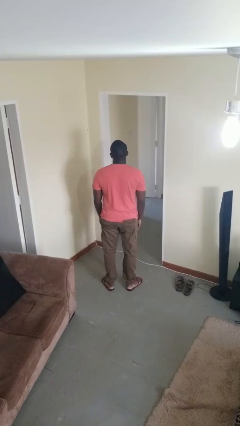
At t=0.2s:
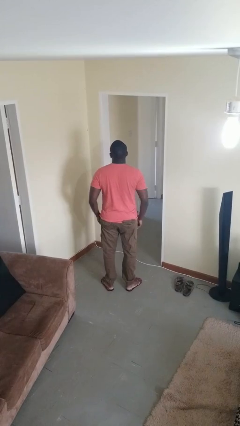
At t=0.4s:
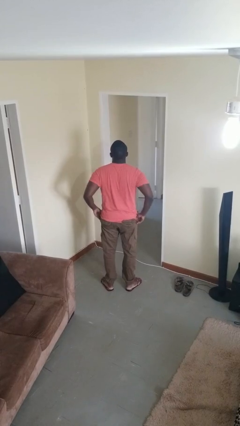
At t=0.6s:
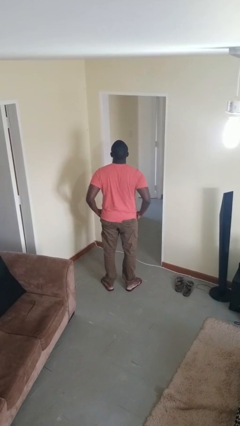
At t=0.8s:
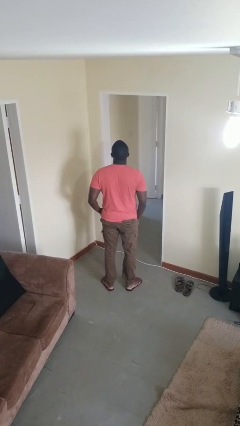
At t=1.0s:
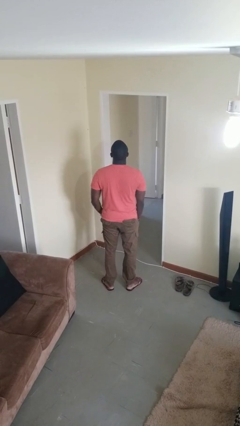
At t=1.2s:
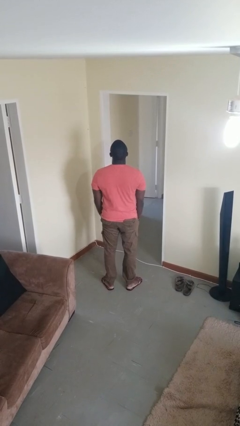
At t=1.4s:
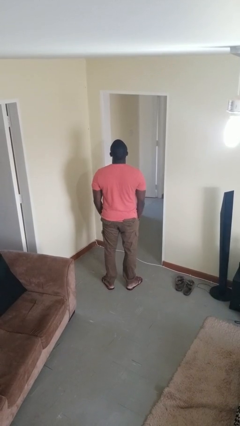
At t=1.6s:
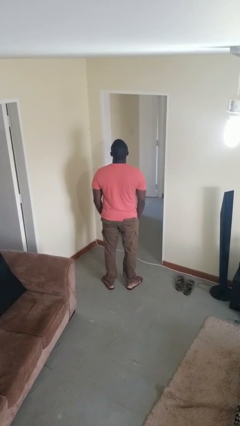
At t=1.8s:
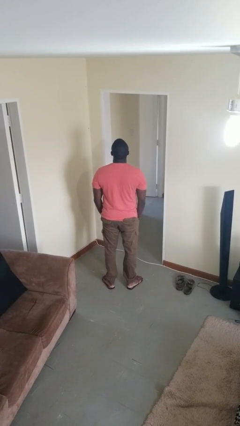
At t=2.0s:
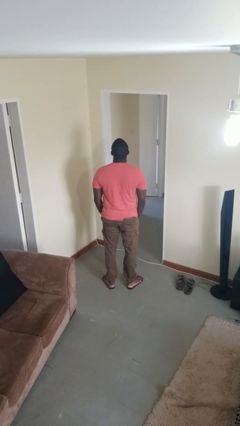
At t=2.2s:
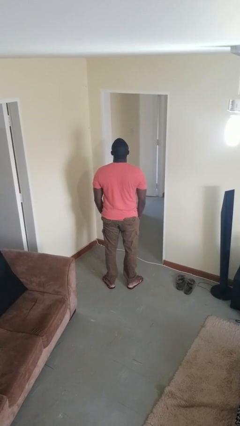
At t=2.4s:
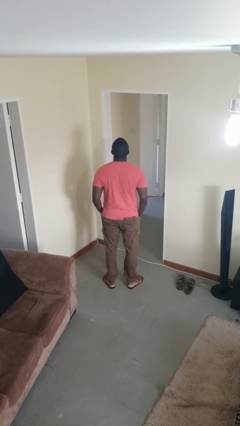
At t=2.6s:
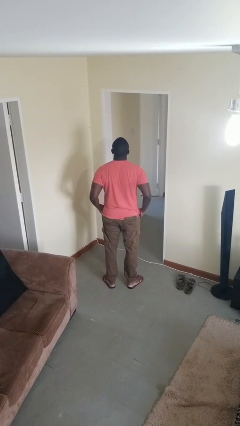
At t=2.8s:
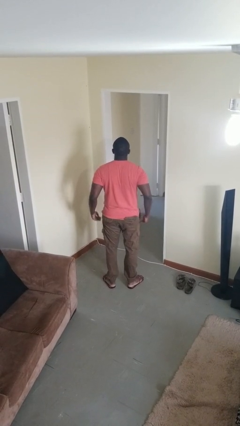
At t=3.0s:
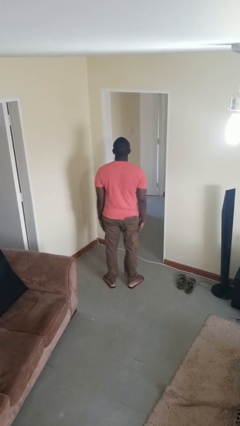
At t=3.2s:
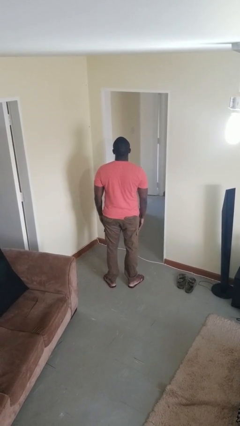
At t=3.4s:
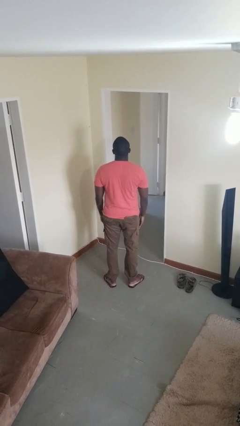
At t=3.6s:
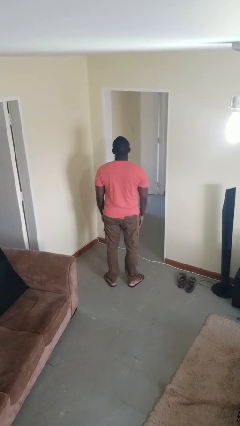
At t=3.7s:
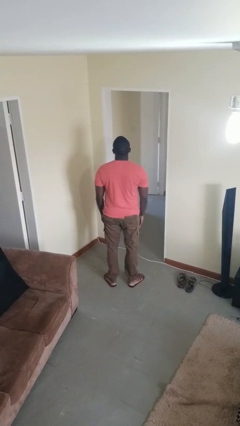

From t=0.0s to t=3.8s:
person puts hands in back pockets

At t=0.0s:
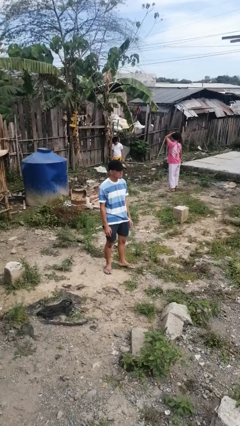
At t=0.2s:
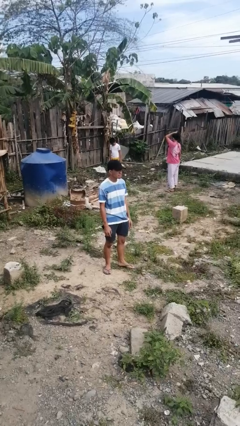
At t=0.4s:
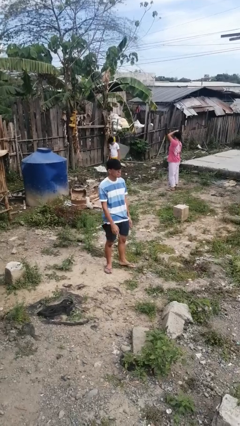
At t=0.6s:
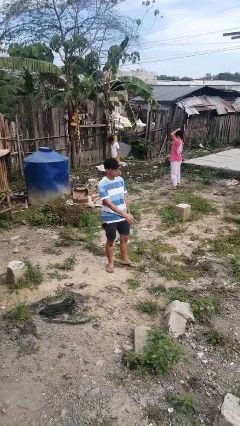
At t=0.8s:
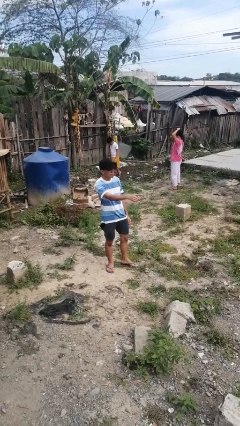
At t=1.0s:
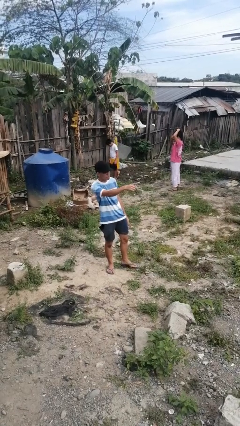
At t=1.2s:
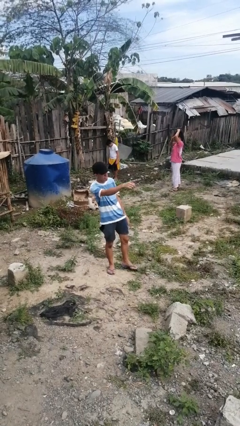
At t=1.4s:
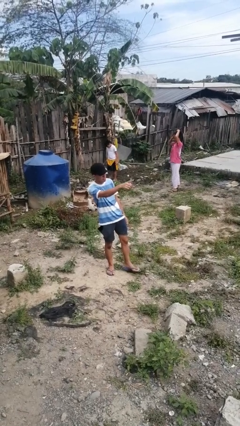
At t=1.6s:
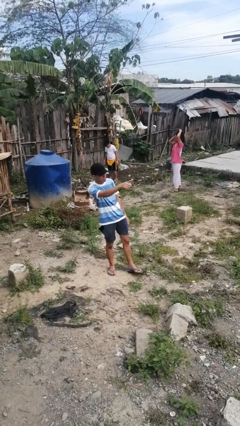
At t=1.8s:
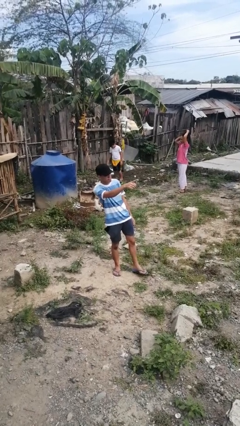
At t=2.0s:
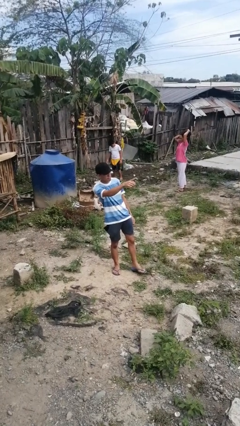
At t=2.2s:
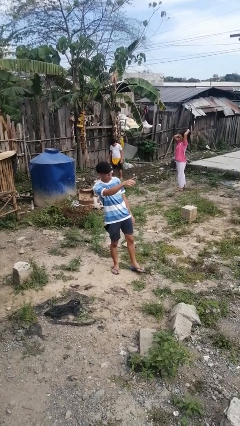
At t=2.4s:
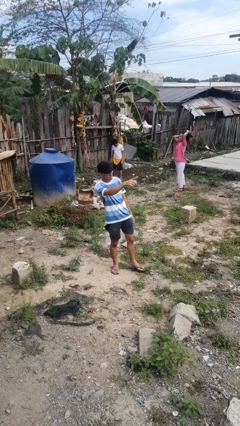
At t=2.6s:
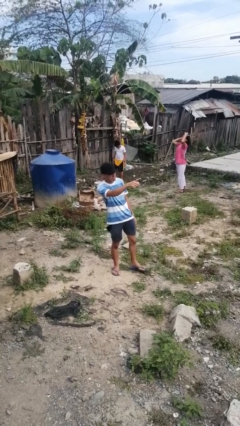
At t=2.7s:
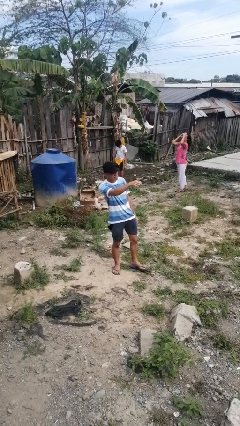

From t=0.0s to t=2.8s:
person points at person

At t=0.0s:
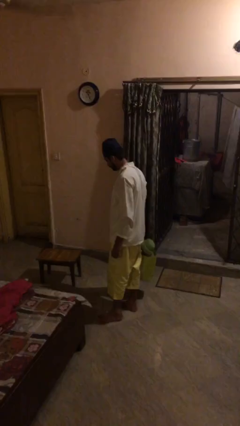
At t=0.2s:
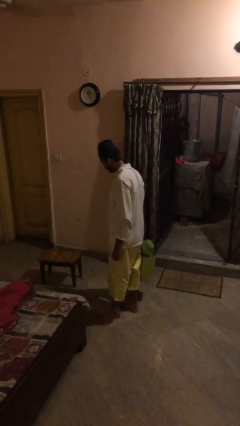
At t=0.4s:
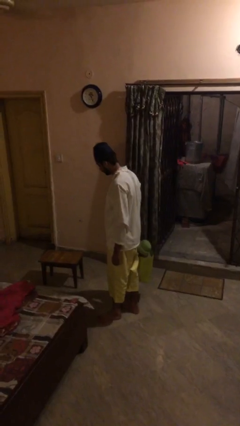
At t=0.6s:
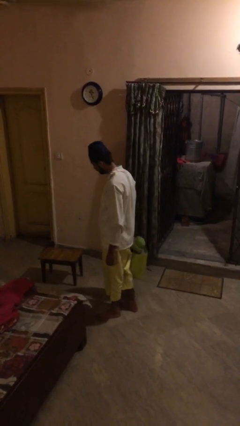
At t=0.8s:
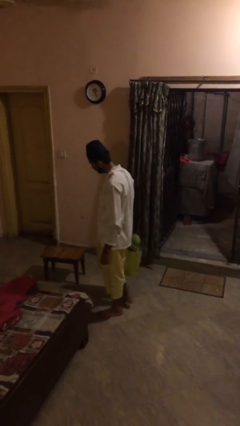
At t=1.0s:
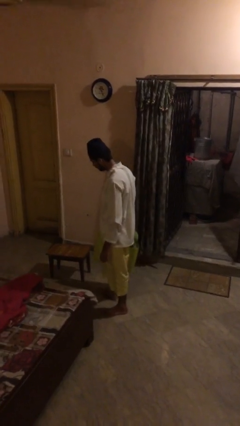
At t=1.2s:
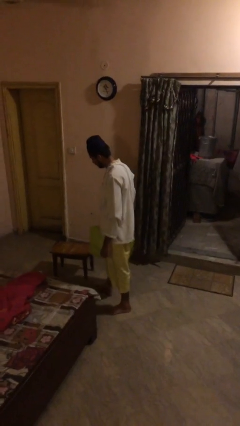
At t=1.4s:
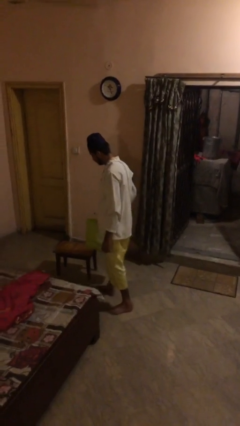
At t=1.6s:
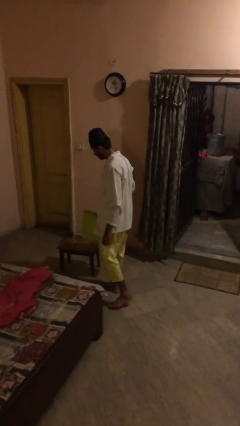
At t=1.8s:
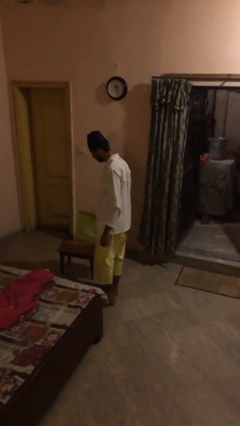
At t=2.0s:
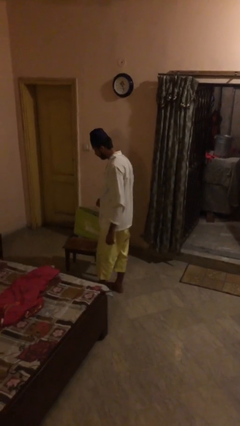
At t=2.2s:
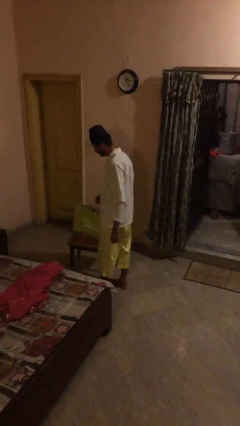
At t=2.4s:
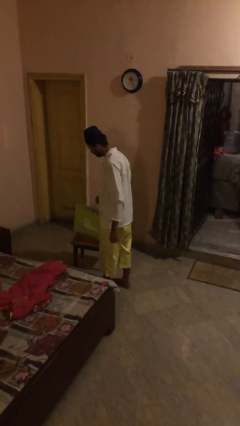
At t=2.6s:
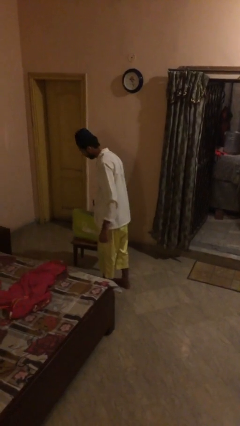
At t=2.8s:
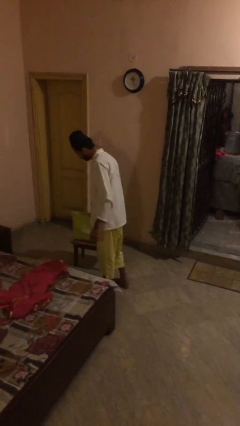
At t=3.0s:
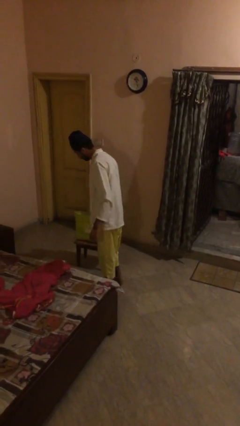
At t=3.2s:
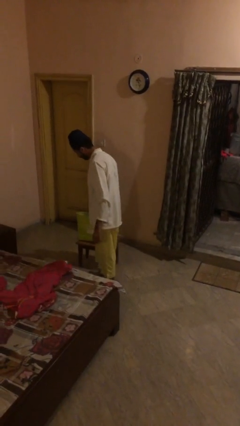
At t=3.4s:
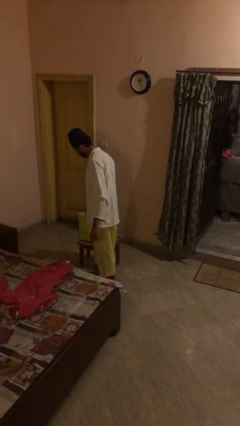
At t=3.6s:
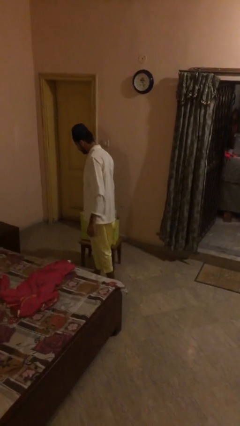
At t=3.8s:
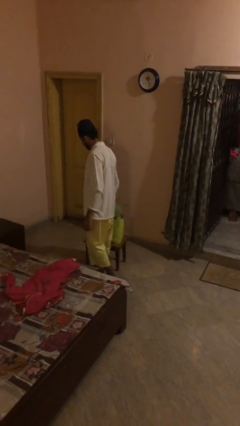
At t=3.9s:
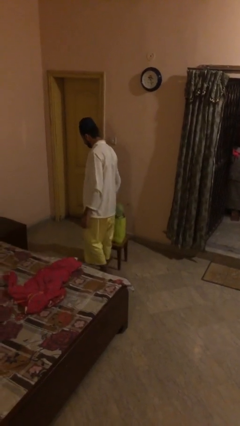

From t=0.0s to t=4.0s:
person puts down object on table

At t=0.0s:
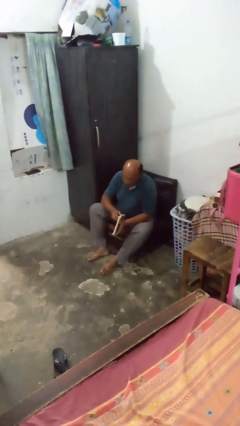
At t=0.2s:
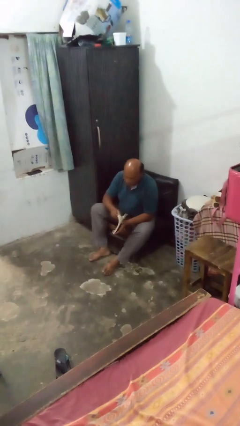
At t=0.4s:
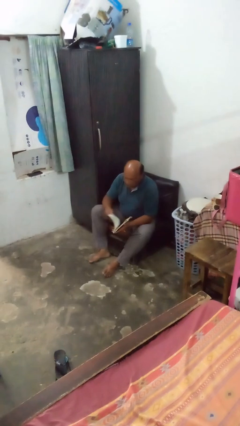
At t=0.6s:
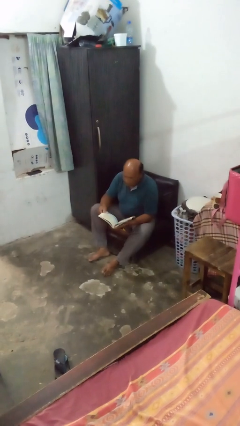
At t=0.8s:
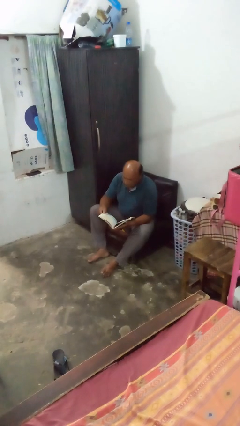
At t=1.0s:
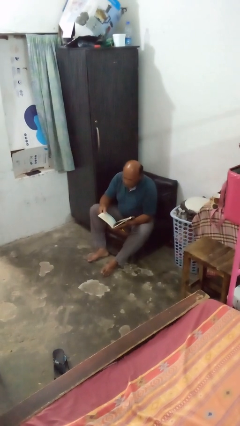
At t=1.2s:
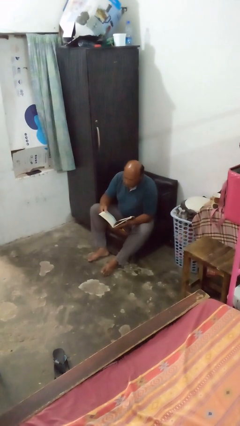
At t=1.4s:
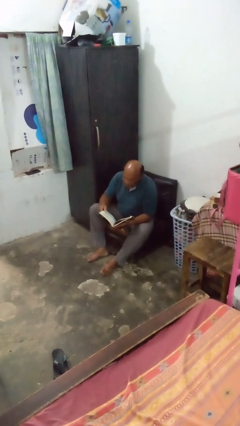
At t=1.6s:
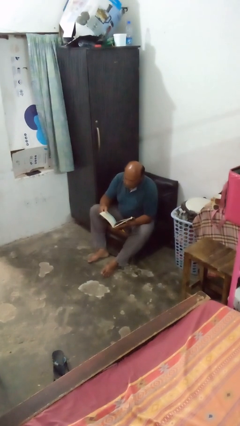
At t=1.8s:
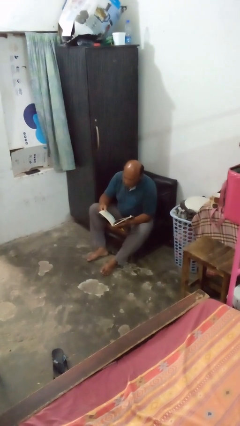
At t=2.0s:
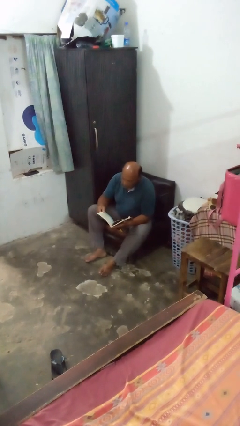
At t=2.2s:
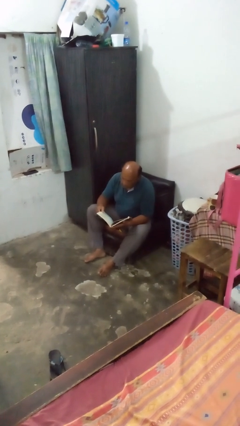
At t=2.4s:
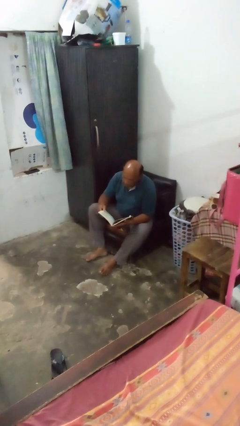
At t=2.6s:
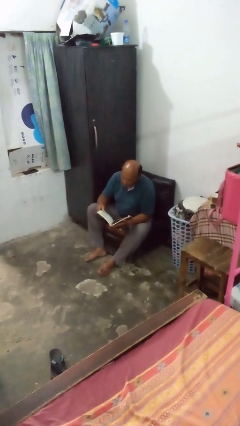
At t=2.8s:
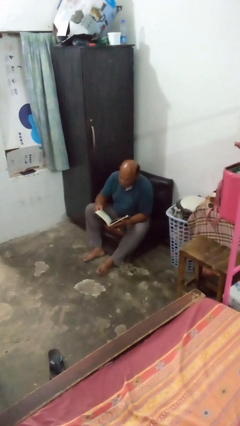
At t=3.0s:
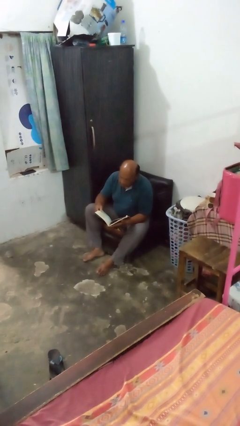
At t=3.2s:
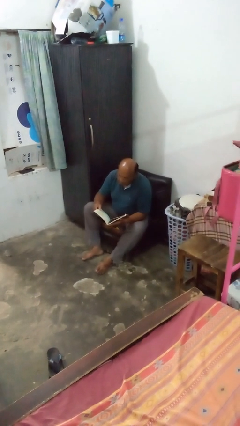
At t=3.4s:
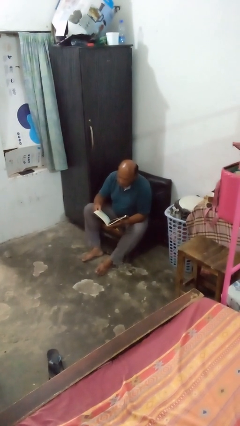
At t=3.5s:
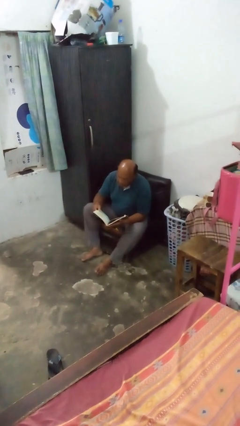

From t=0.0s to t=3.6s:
person reads magazine

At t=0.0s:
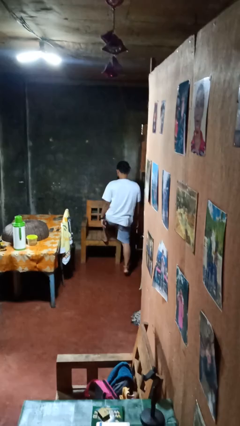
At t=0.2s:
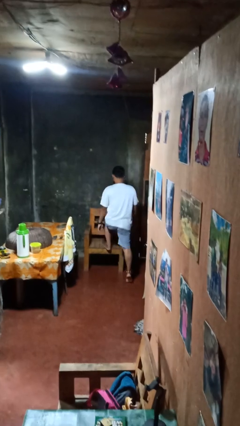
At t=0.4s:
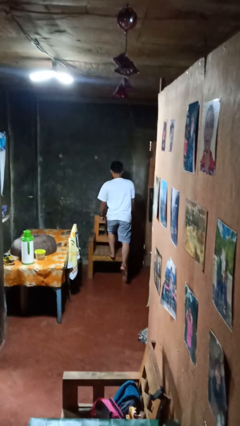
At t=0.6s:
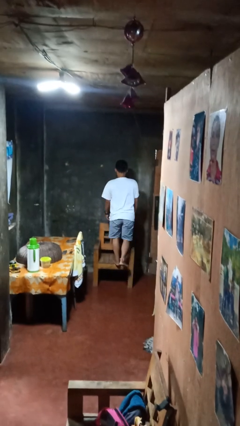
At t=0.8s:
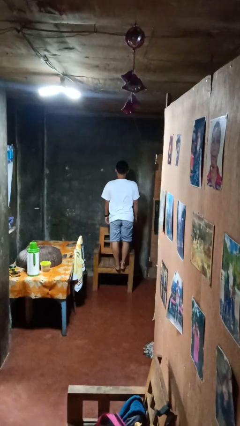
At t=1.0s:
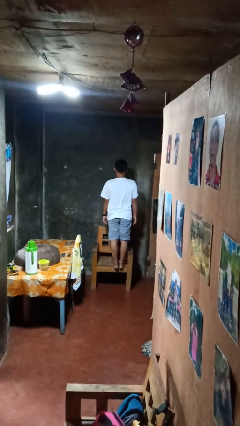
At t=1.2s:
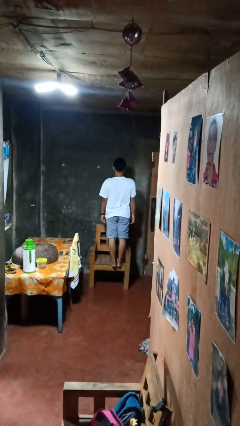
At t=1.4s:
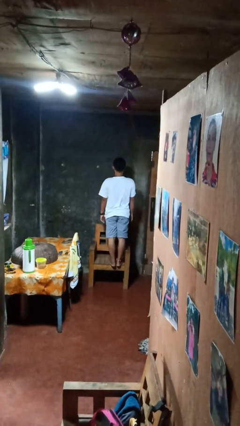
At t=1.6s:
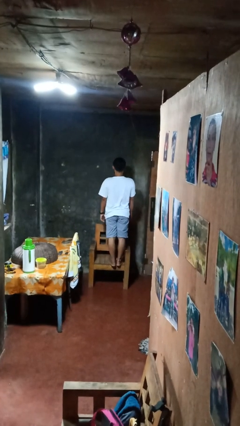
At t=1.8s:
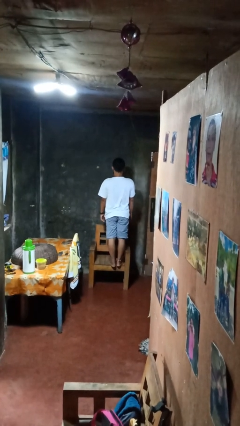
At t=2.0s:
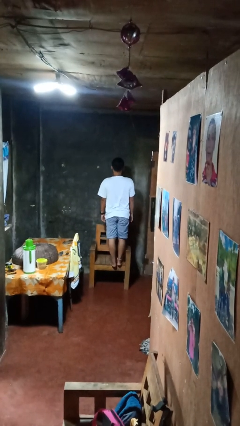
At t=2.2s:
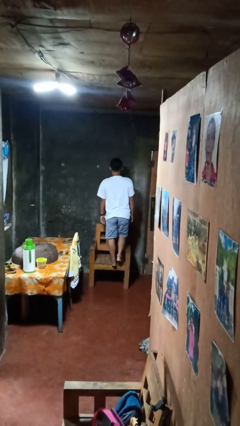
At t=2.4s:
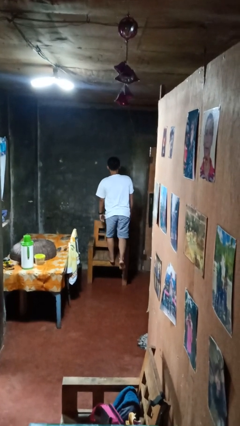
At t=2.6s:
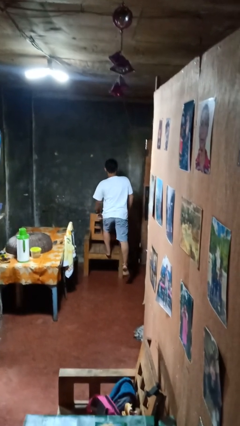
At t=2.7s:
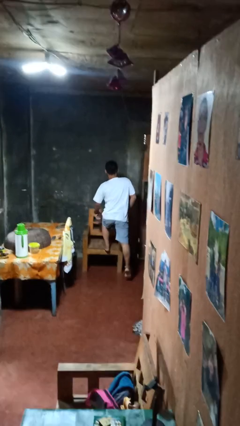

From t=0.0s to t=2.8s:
person climbs on chair

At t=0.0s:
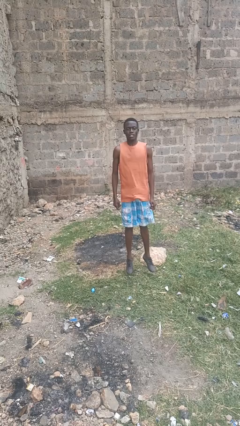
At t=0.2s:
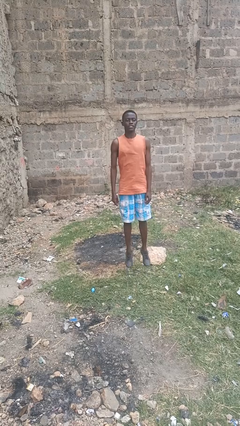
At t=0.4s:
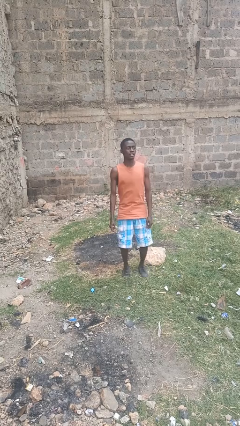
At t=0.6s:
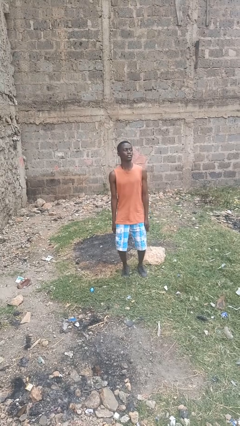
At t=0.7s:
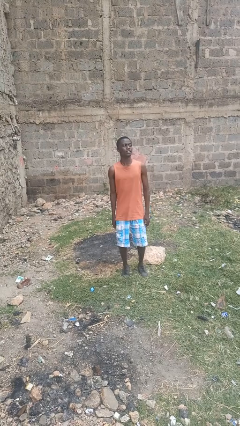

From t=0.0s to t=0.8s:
person jumps
